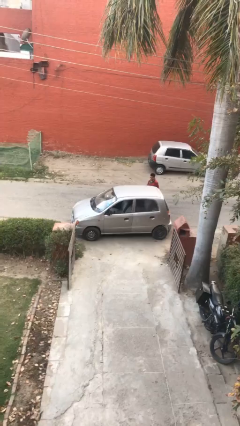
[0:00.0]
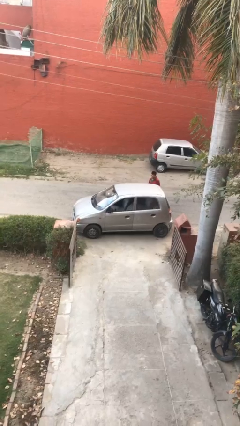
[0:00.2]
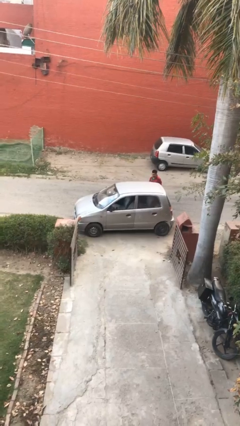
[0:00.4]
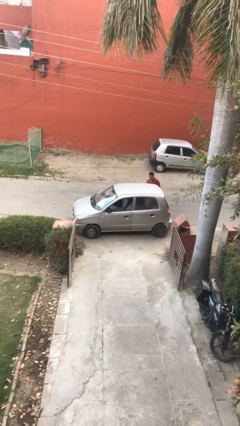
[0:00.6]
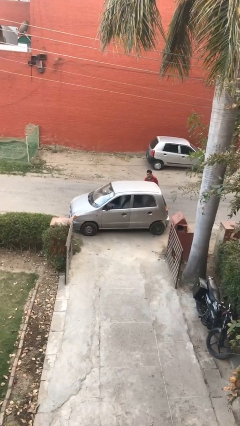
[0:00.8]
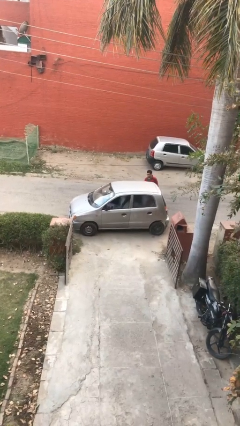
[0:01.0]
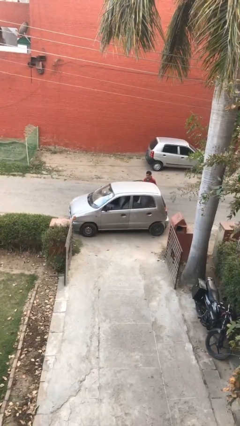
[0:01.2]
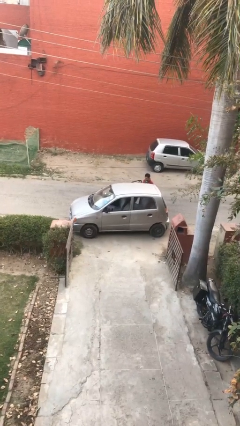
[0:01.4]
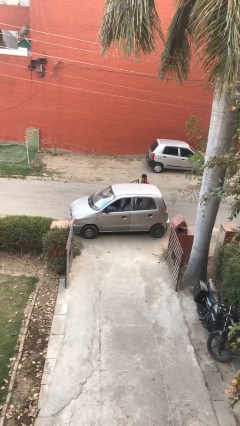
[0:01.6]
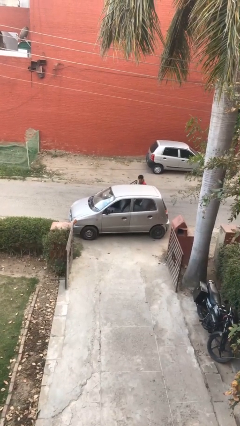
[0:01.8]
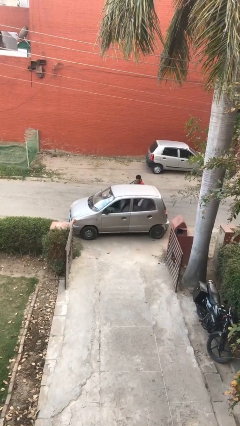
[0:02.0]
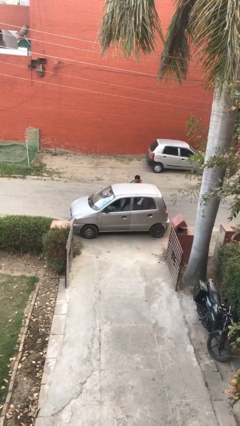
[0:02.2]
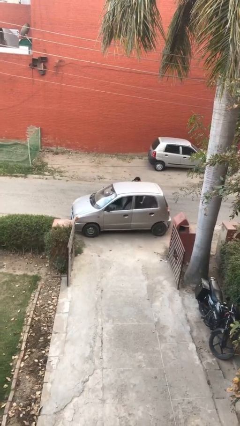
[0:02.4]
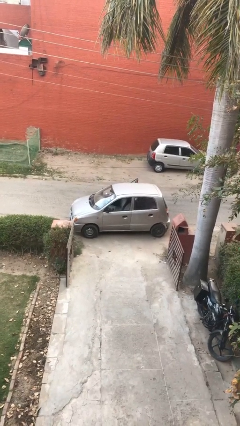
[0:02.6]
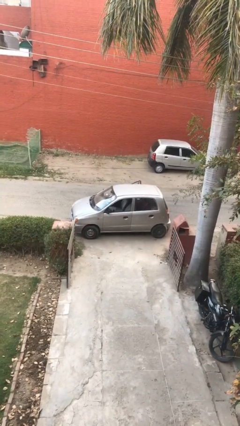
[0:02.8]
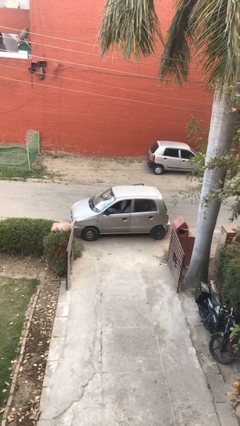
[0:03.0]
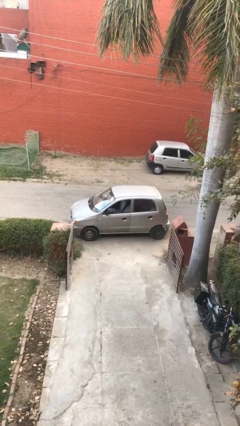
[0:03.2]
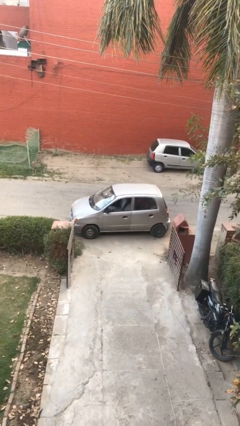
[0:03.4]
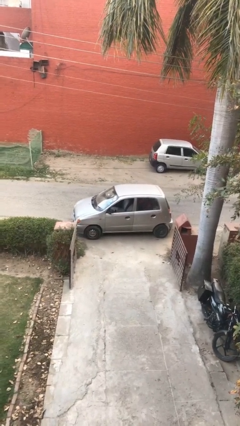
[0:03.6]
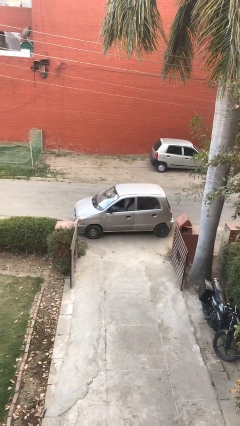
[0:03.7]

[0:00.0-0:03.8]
car picks up person

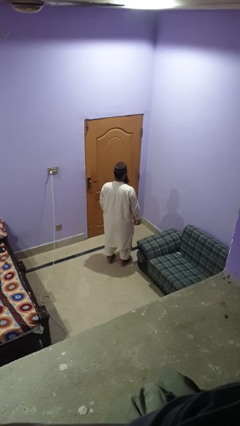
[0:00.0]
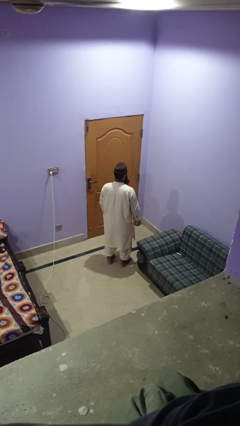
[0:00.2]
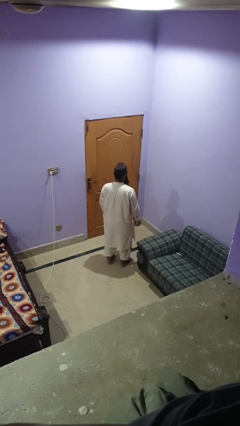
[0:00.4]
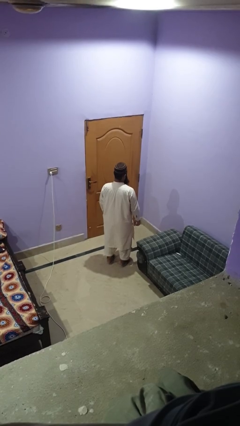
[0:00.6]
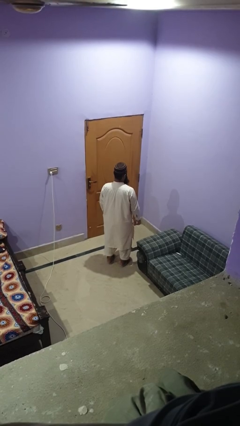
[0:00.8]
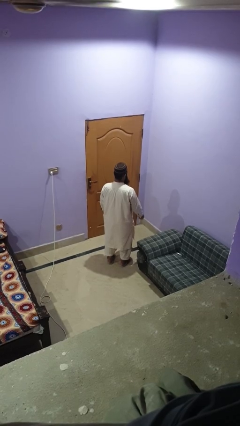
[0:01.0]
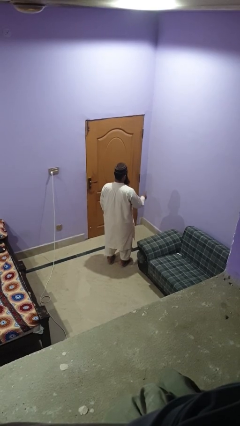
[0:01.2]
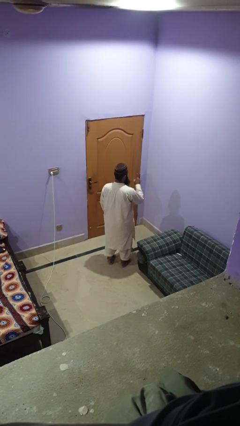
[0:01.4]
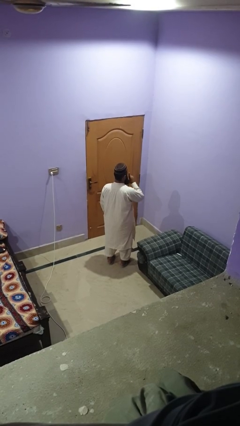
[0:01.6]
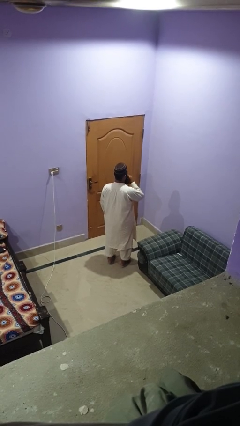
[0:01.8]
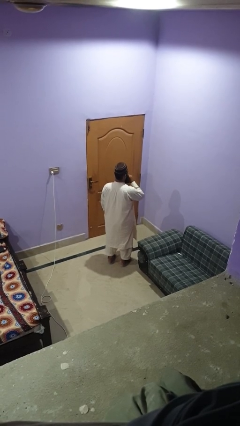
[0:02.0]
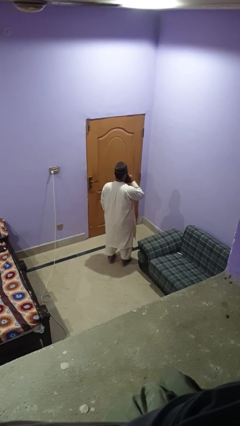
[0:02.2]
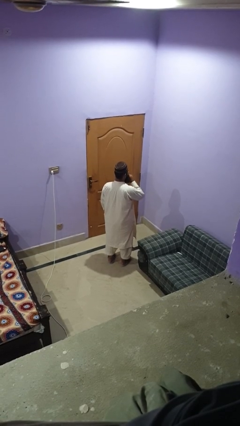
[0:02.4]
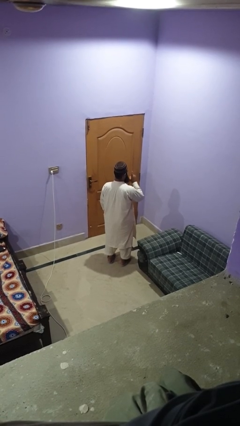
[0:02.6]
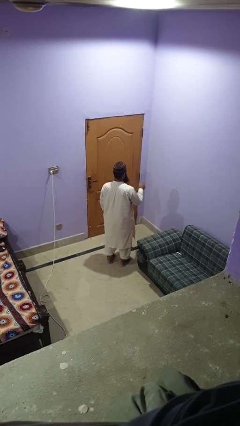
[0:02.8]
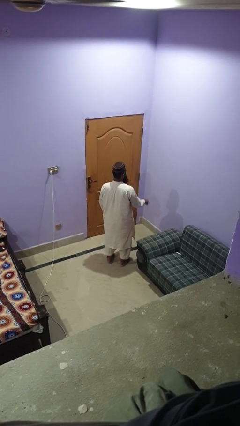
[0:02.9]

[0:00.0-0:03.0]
person gestures be quiet

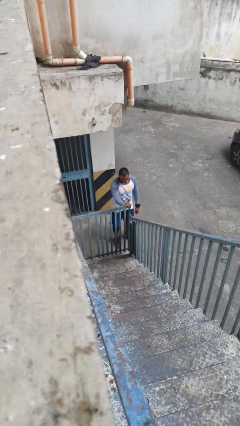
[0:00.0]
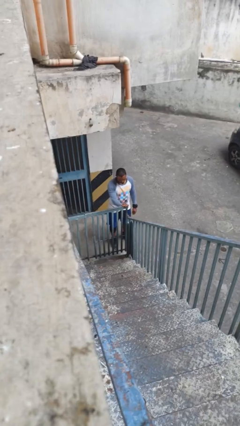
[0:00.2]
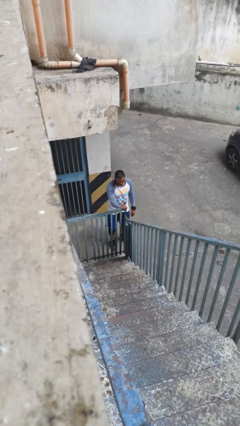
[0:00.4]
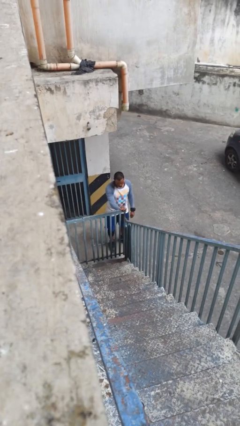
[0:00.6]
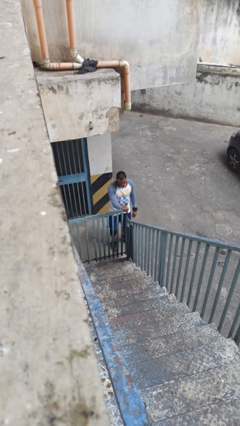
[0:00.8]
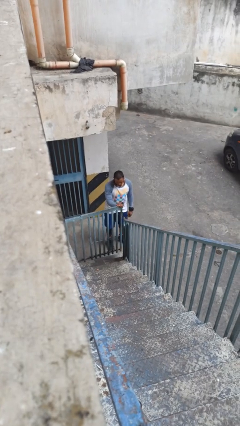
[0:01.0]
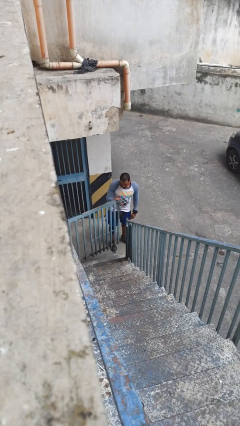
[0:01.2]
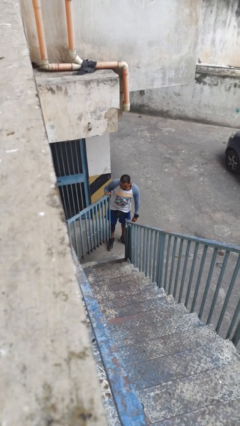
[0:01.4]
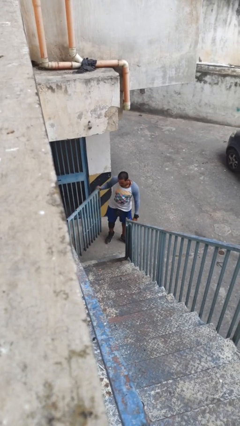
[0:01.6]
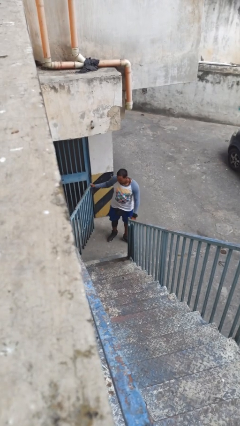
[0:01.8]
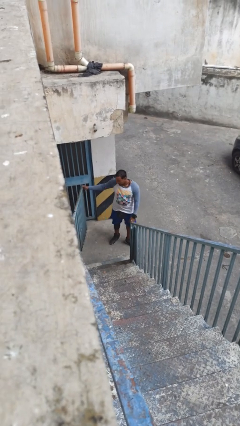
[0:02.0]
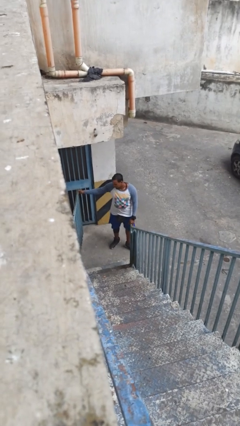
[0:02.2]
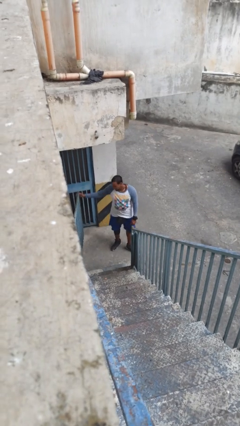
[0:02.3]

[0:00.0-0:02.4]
person opens facility door

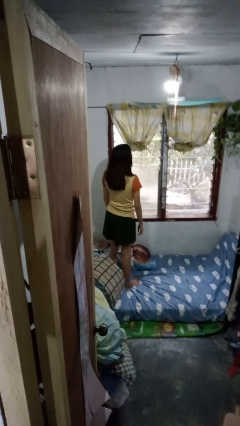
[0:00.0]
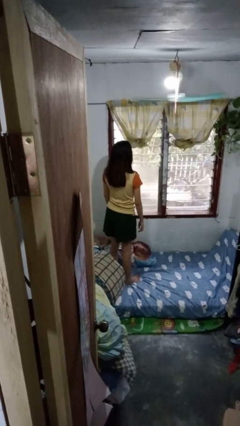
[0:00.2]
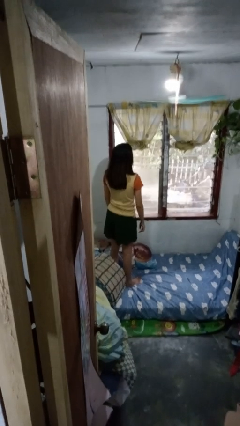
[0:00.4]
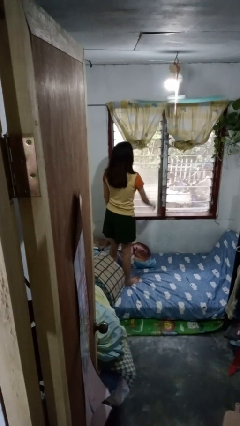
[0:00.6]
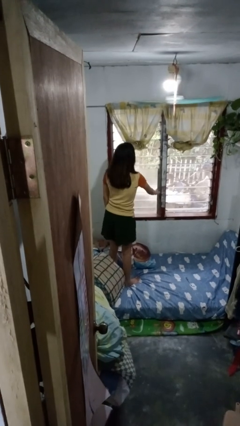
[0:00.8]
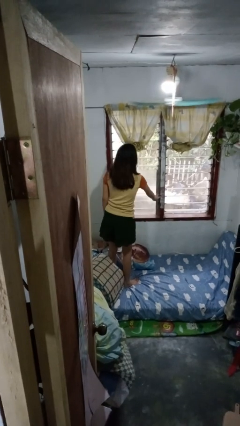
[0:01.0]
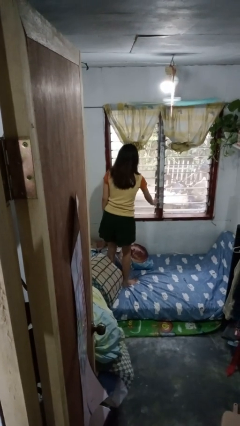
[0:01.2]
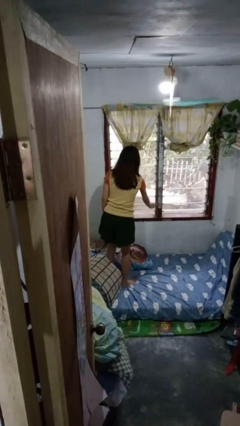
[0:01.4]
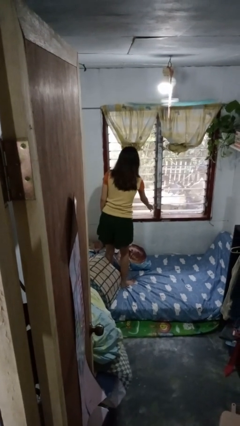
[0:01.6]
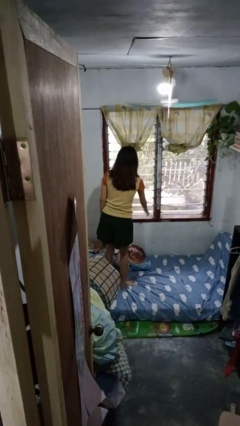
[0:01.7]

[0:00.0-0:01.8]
person opens home window

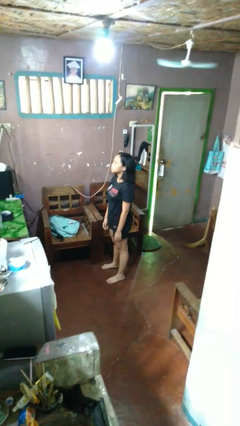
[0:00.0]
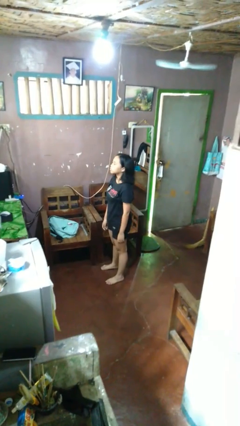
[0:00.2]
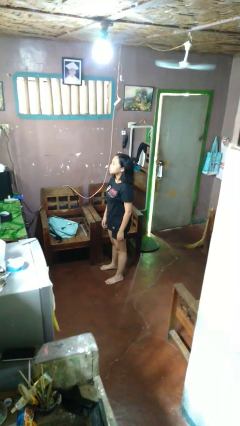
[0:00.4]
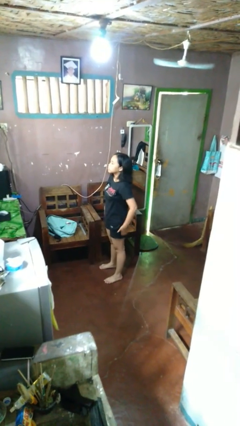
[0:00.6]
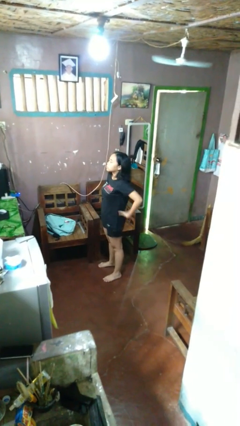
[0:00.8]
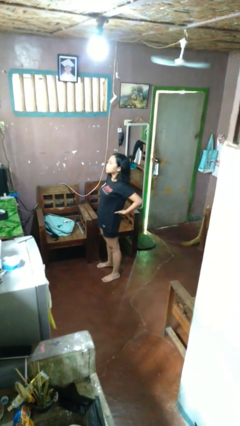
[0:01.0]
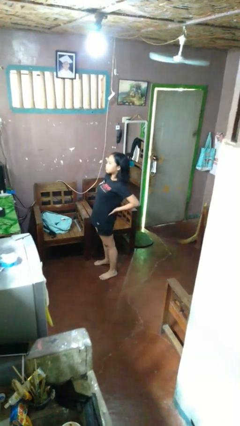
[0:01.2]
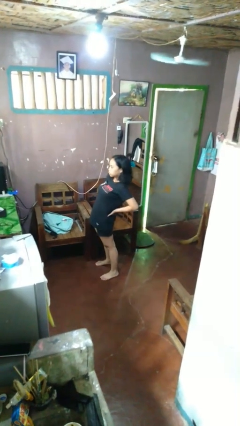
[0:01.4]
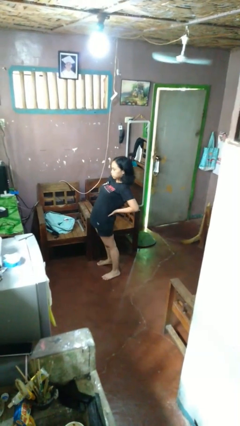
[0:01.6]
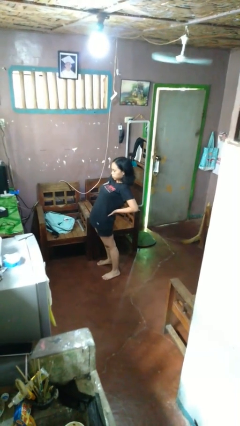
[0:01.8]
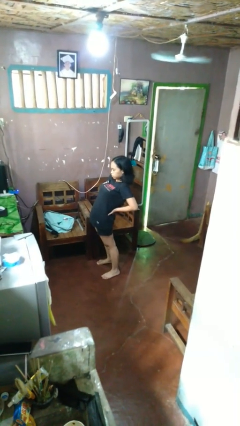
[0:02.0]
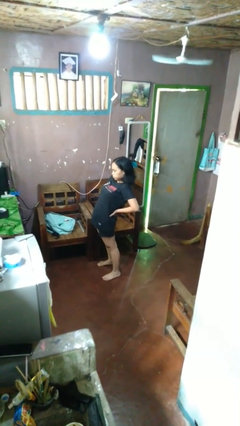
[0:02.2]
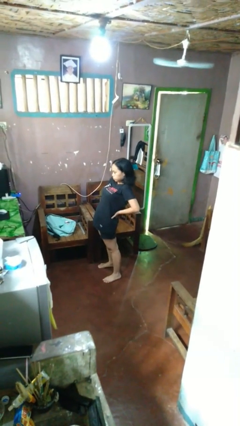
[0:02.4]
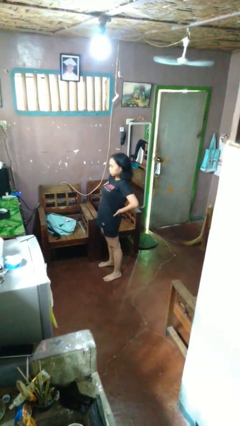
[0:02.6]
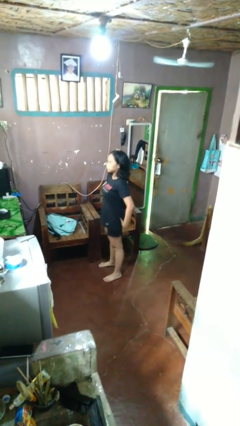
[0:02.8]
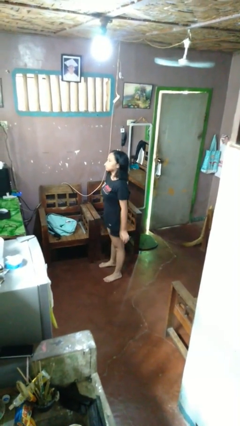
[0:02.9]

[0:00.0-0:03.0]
person stretches back

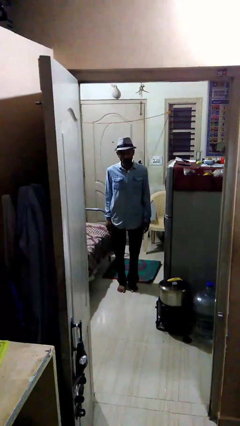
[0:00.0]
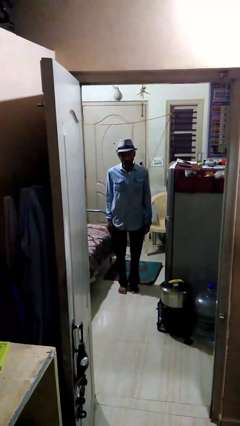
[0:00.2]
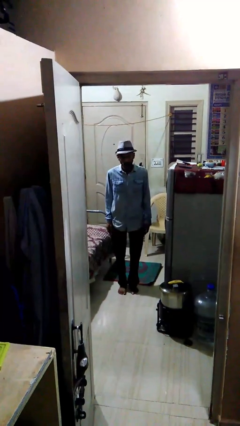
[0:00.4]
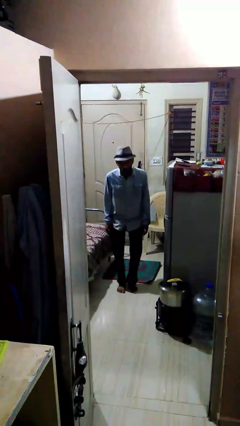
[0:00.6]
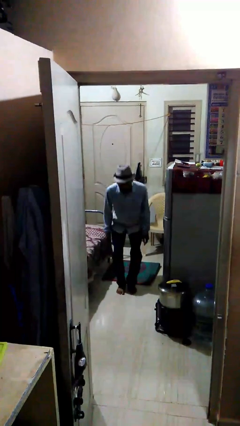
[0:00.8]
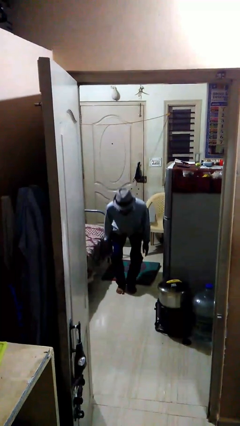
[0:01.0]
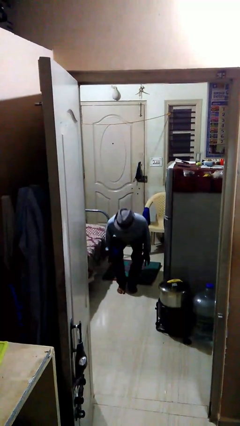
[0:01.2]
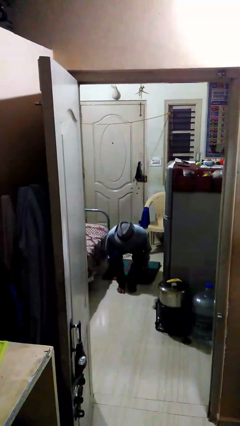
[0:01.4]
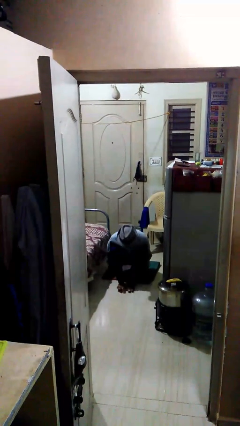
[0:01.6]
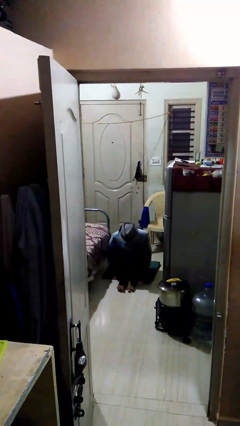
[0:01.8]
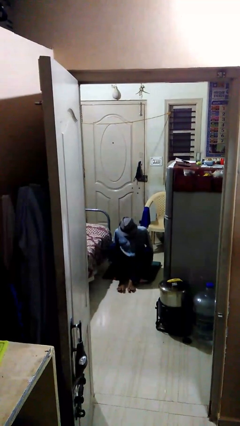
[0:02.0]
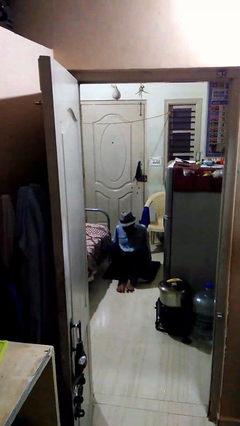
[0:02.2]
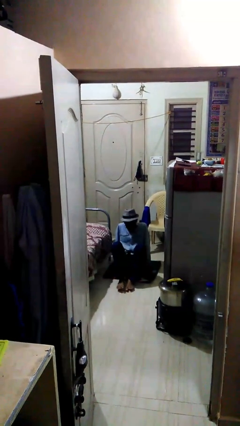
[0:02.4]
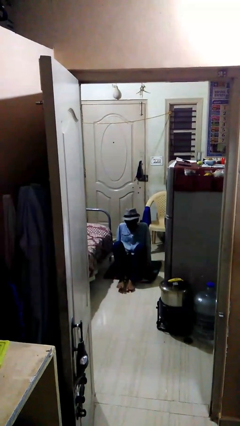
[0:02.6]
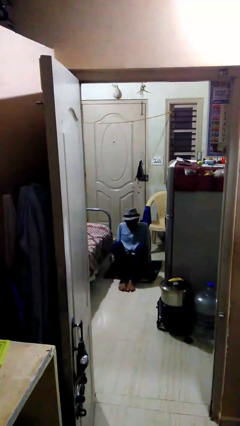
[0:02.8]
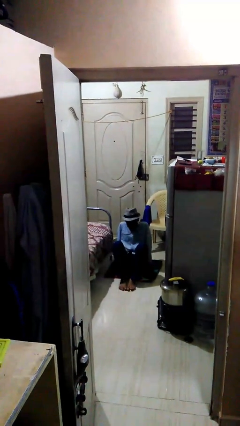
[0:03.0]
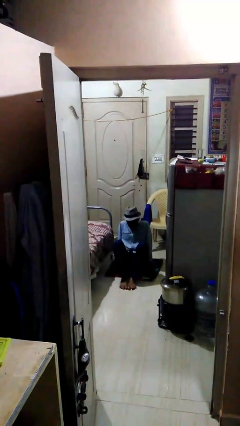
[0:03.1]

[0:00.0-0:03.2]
person sits down

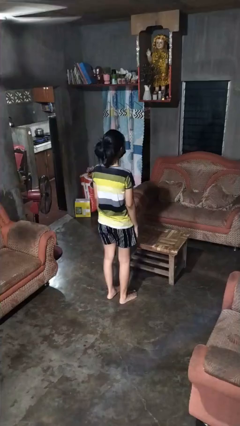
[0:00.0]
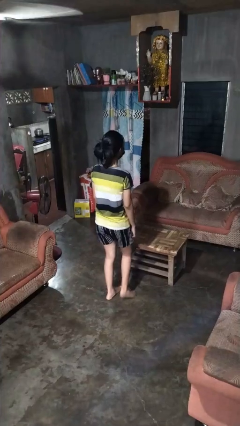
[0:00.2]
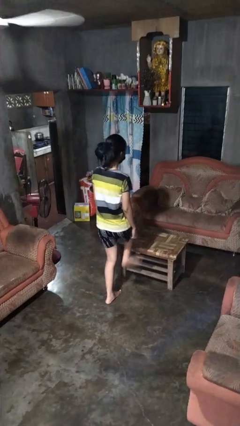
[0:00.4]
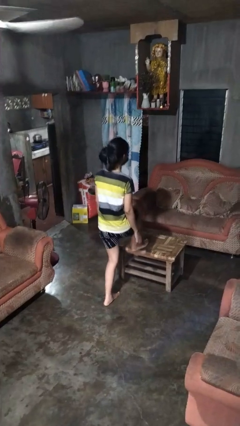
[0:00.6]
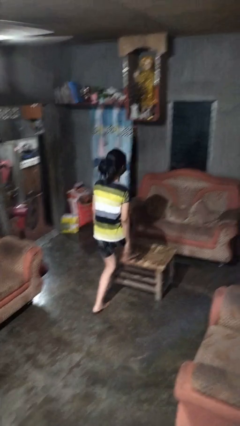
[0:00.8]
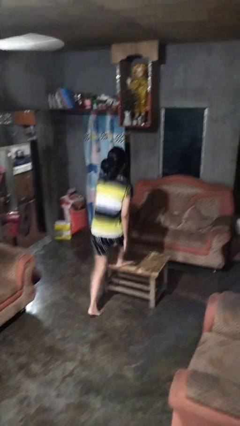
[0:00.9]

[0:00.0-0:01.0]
person climbs on table
